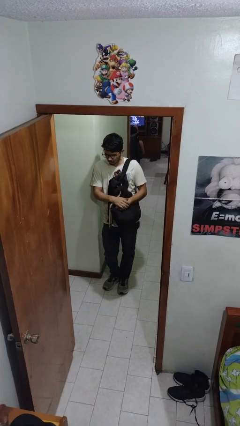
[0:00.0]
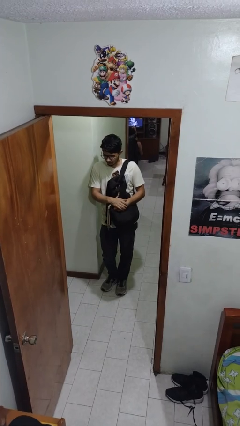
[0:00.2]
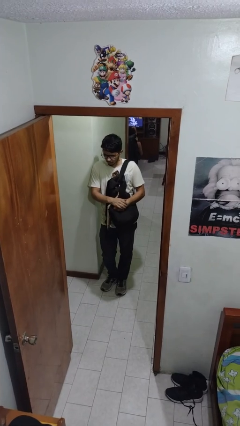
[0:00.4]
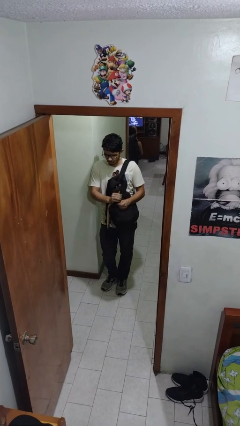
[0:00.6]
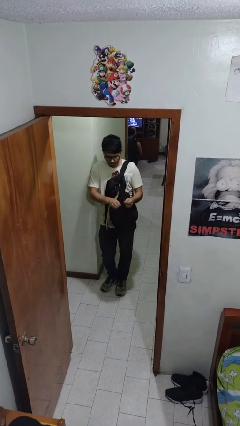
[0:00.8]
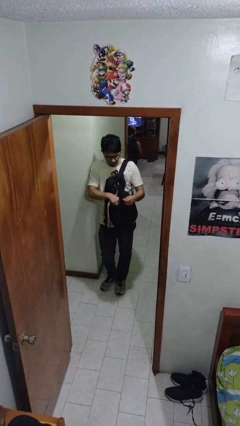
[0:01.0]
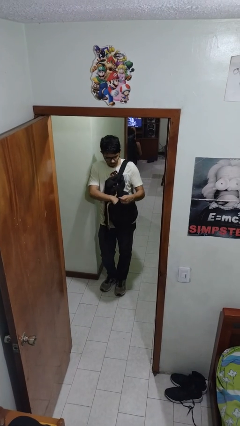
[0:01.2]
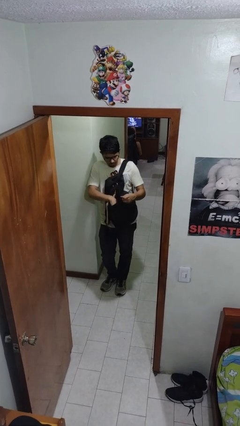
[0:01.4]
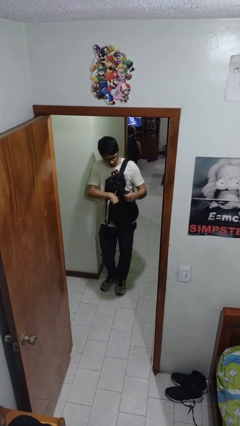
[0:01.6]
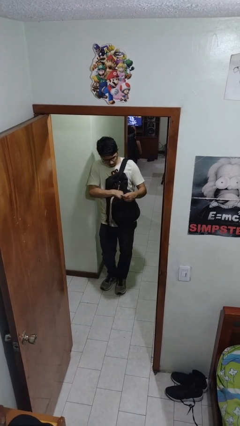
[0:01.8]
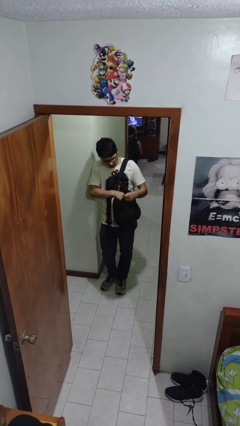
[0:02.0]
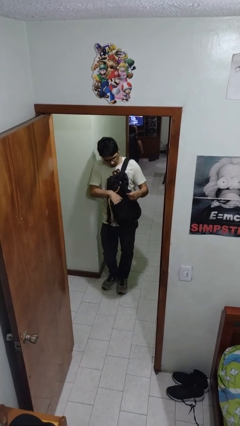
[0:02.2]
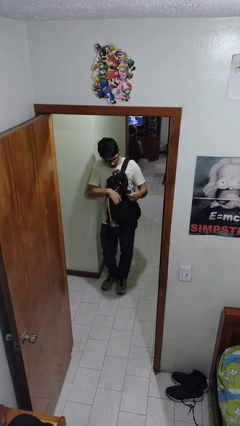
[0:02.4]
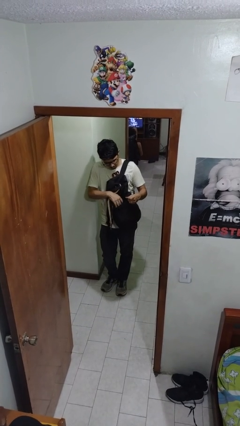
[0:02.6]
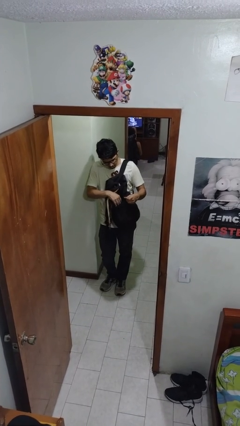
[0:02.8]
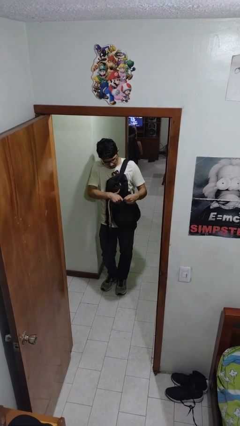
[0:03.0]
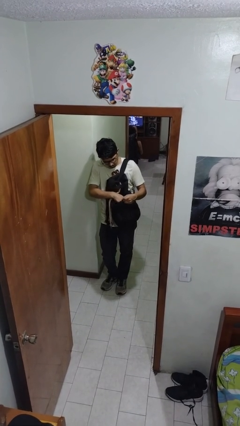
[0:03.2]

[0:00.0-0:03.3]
person searches in backpack

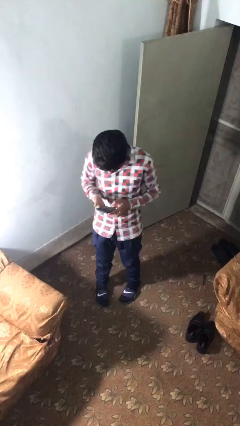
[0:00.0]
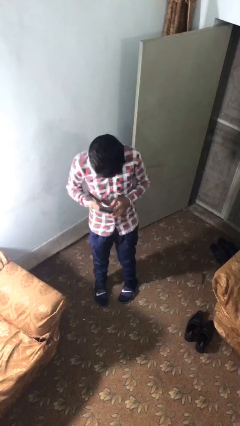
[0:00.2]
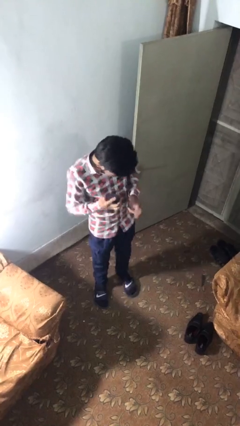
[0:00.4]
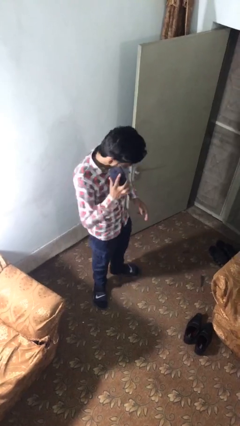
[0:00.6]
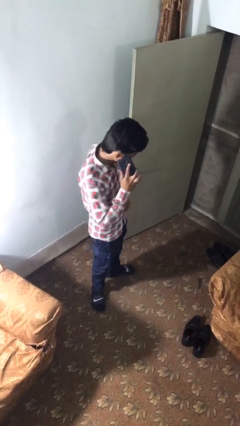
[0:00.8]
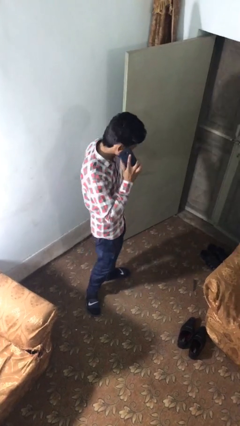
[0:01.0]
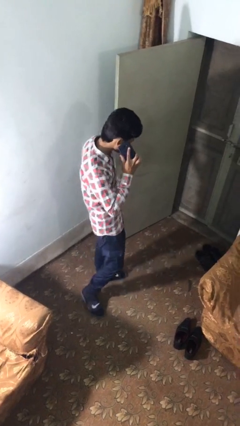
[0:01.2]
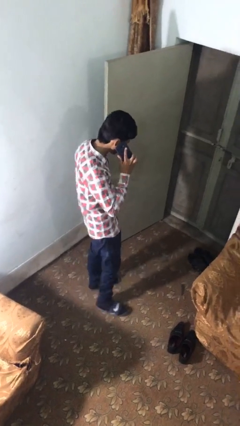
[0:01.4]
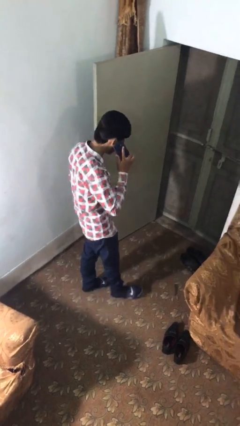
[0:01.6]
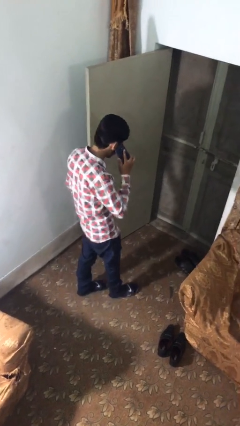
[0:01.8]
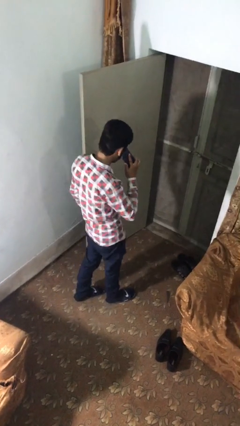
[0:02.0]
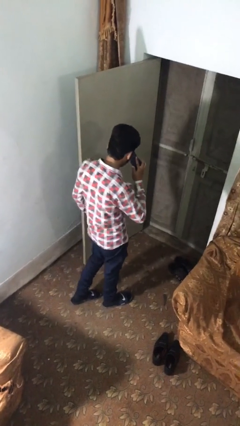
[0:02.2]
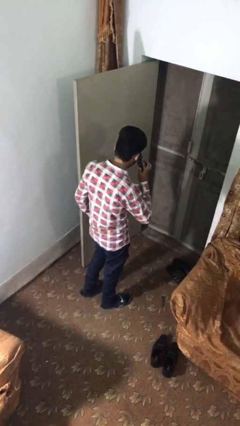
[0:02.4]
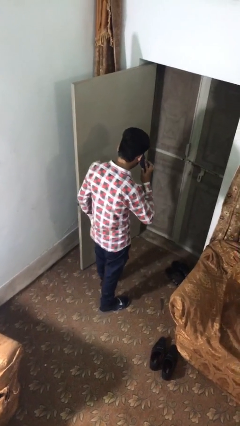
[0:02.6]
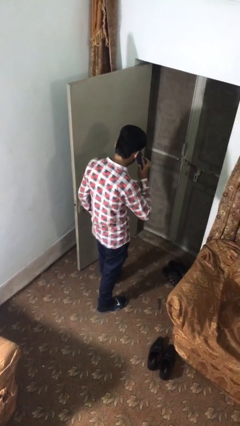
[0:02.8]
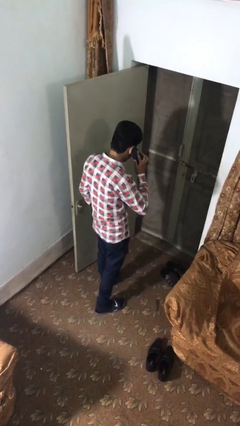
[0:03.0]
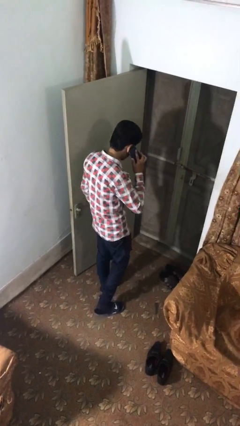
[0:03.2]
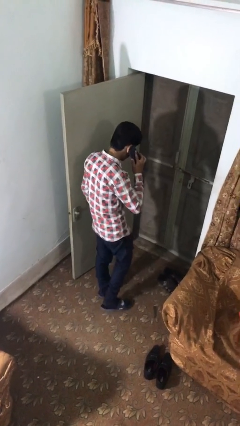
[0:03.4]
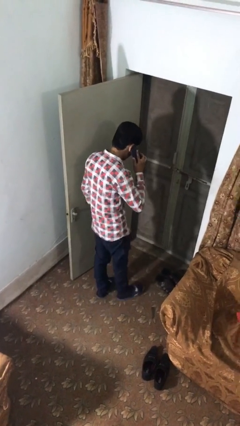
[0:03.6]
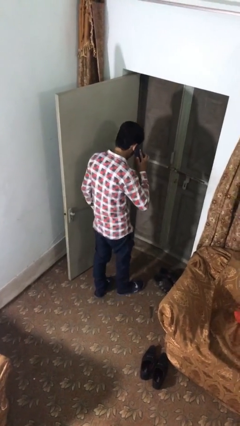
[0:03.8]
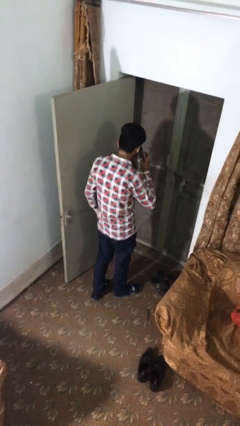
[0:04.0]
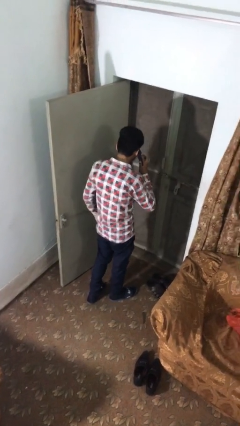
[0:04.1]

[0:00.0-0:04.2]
person talks on phone

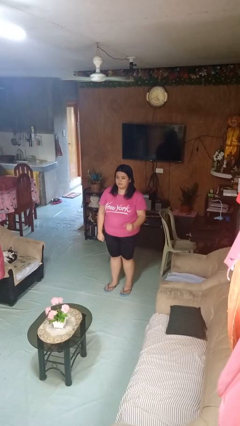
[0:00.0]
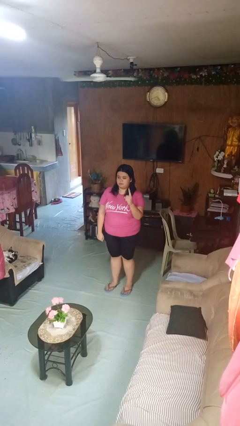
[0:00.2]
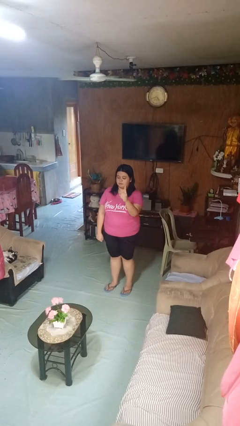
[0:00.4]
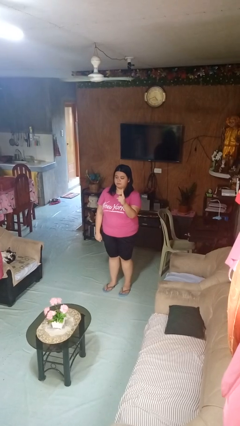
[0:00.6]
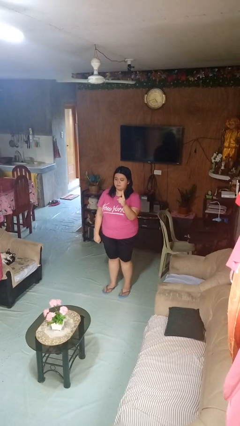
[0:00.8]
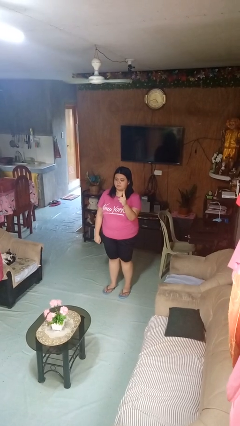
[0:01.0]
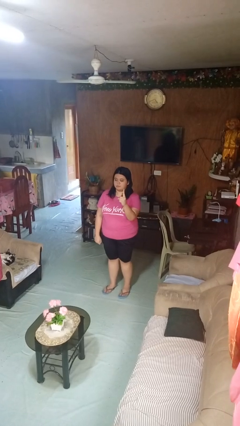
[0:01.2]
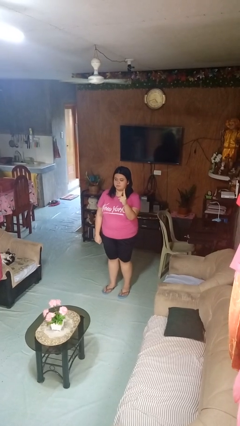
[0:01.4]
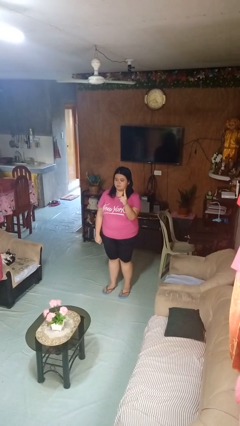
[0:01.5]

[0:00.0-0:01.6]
person gestures number one

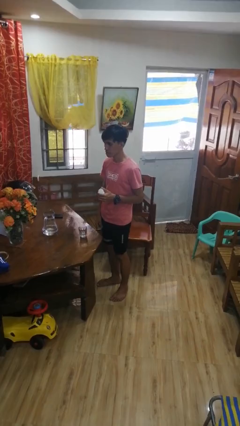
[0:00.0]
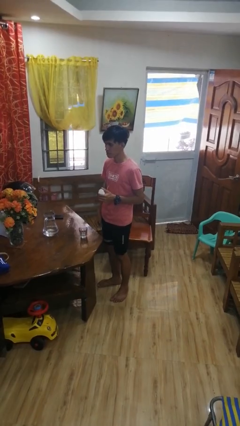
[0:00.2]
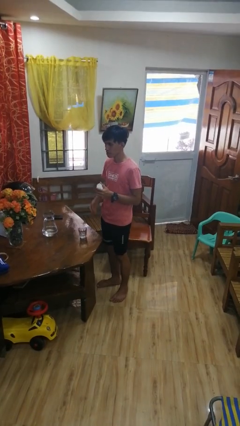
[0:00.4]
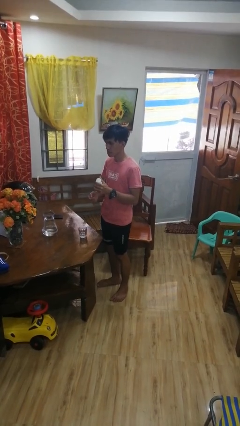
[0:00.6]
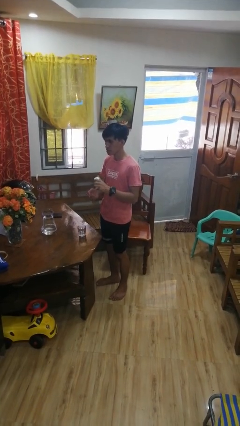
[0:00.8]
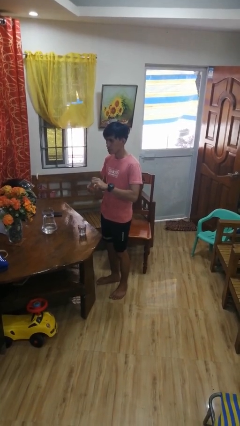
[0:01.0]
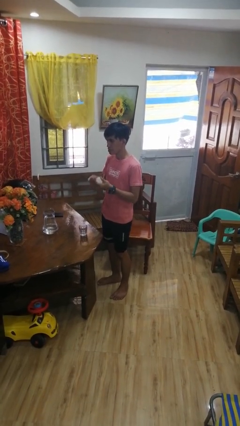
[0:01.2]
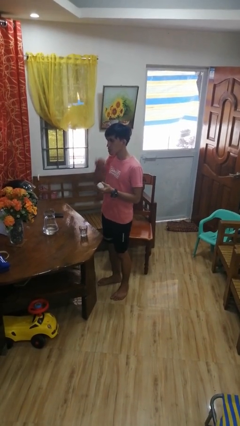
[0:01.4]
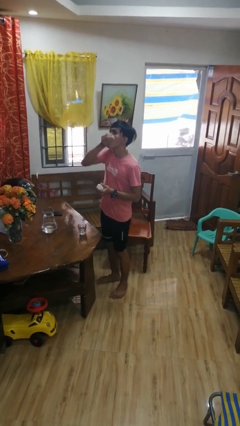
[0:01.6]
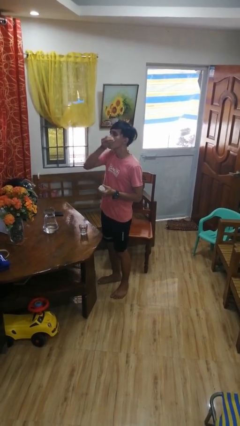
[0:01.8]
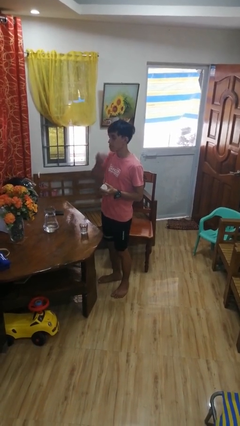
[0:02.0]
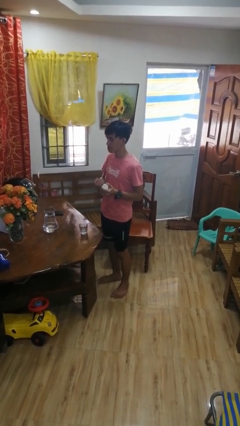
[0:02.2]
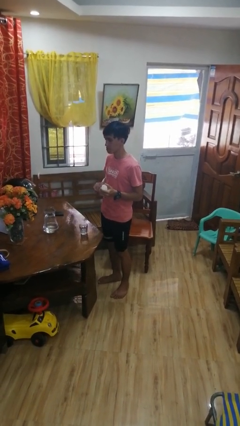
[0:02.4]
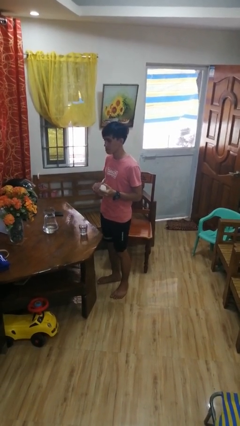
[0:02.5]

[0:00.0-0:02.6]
person takes medicine pills

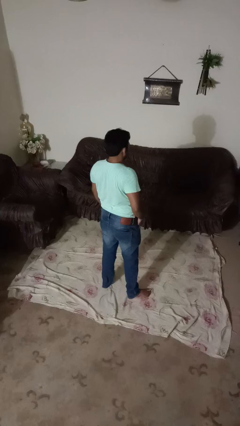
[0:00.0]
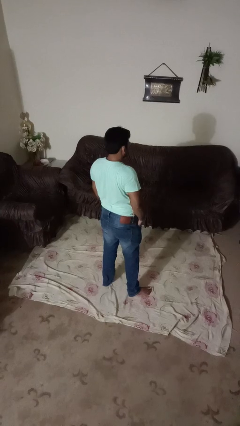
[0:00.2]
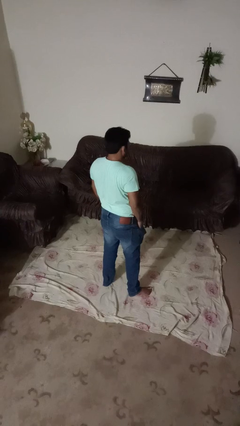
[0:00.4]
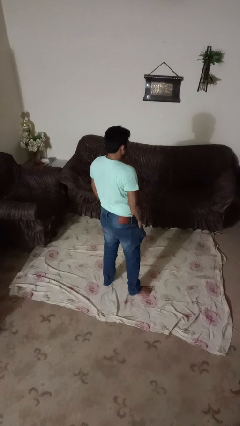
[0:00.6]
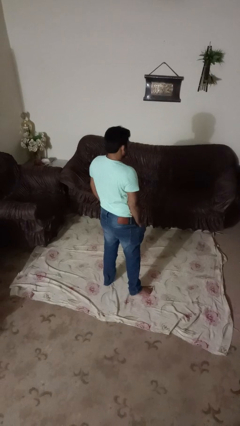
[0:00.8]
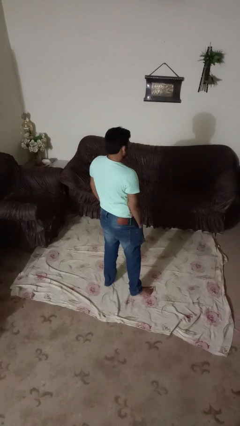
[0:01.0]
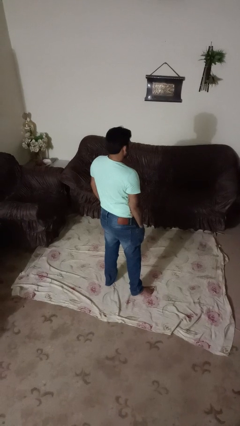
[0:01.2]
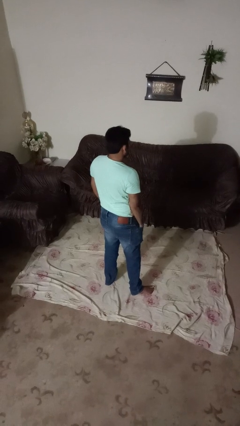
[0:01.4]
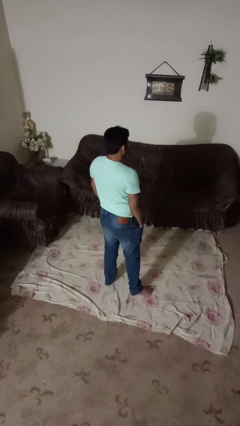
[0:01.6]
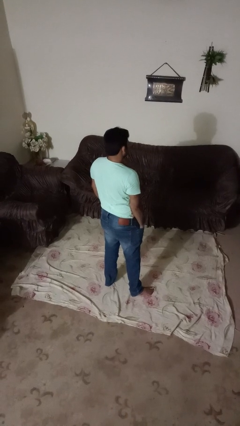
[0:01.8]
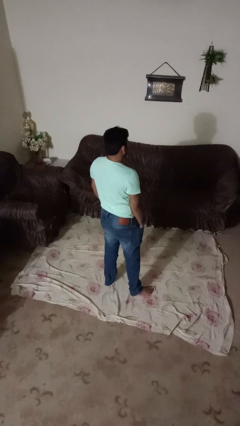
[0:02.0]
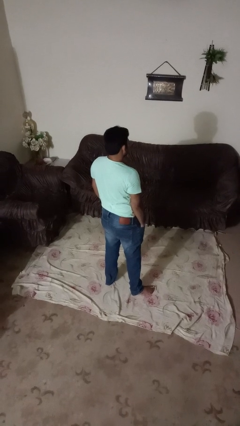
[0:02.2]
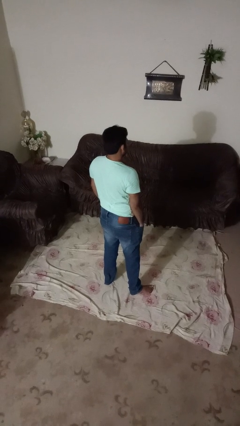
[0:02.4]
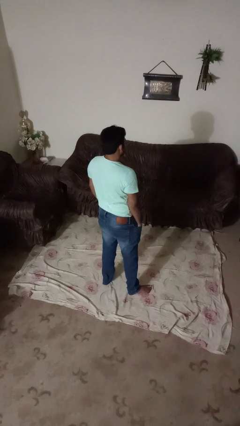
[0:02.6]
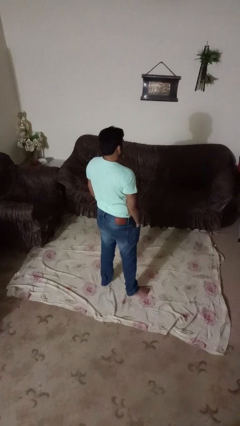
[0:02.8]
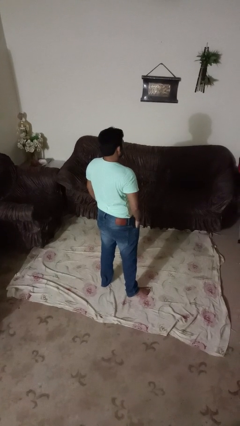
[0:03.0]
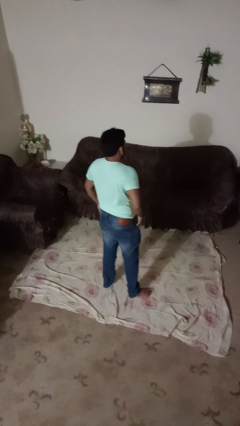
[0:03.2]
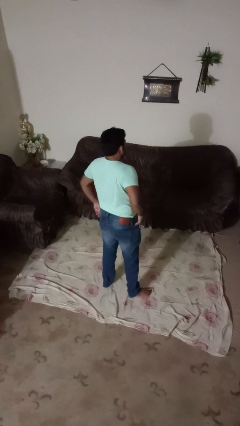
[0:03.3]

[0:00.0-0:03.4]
person puts hands in back pockets

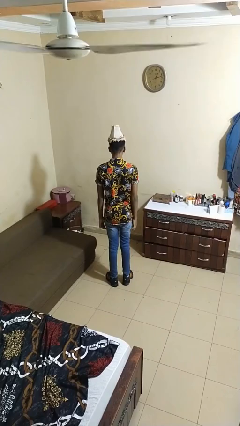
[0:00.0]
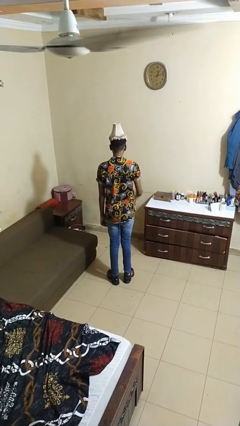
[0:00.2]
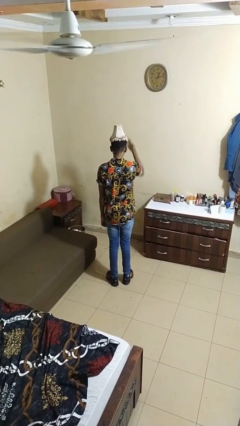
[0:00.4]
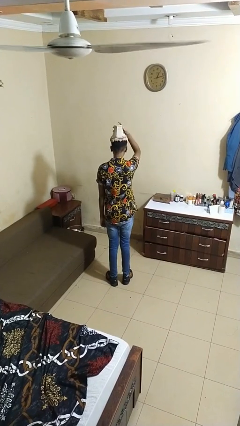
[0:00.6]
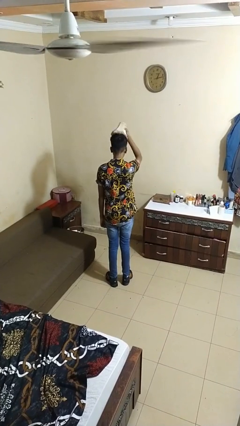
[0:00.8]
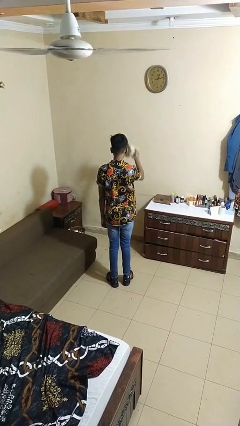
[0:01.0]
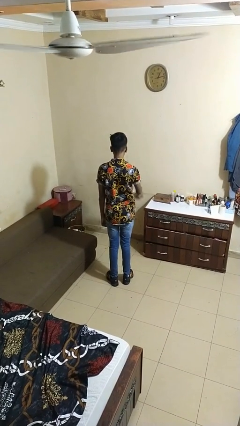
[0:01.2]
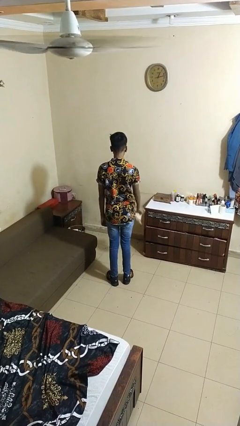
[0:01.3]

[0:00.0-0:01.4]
person takes off hat

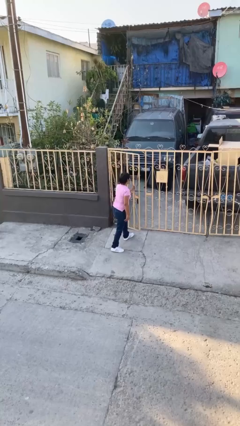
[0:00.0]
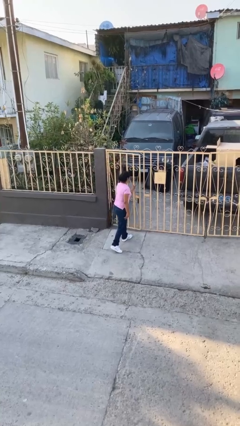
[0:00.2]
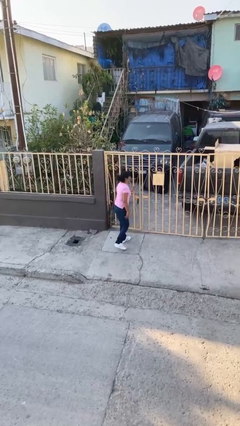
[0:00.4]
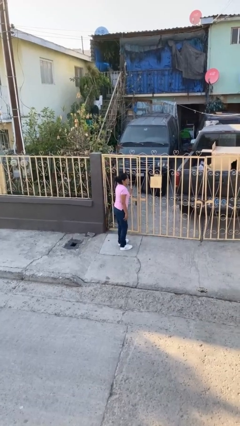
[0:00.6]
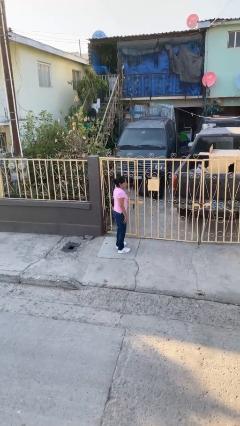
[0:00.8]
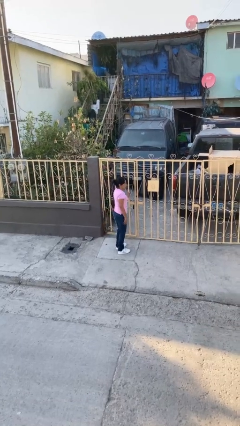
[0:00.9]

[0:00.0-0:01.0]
person closes facility door
